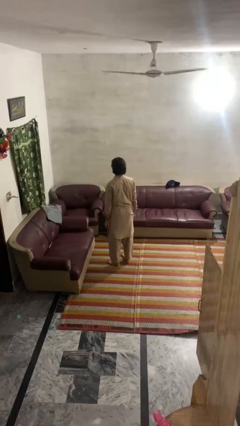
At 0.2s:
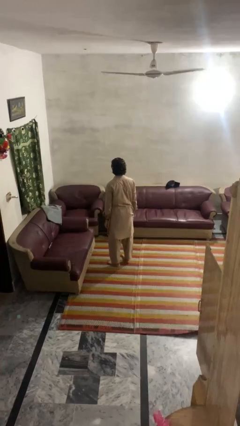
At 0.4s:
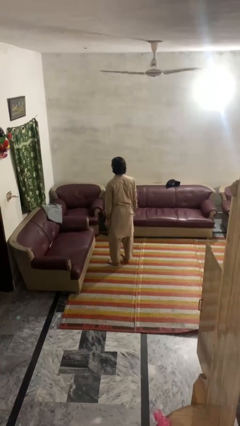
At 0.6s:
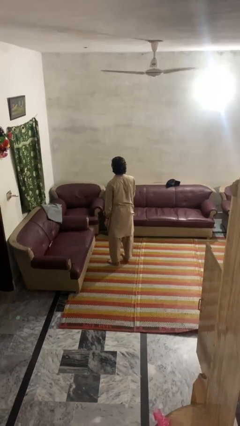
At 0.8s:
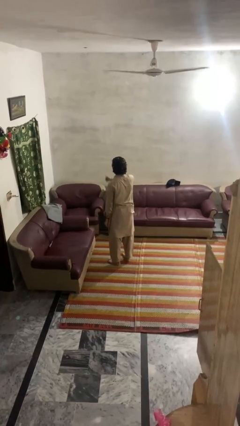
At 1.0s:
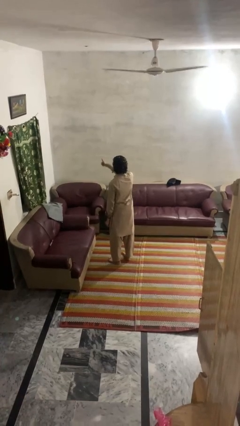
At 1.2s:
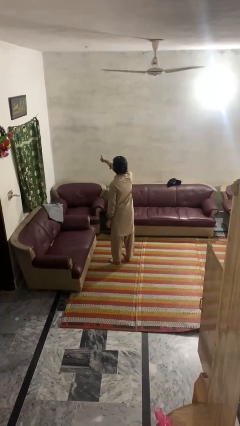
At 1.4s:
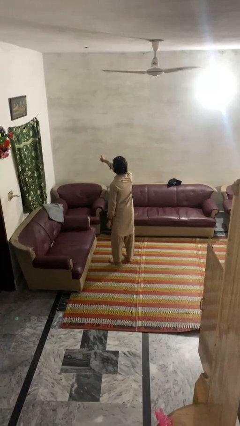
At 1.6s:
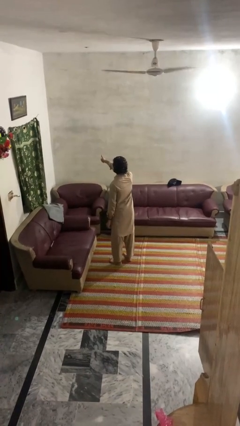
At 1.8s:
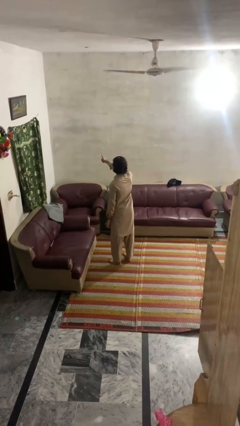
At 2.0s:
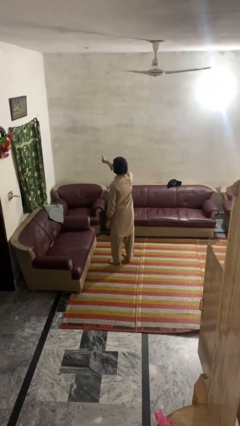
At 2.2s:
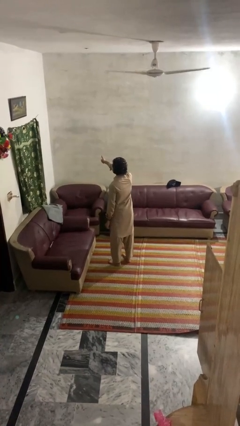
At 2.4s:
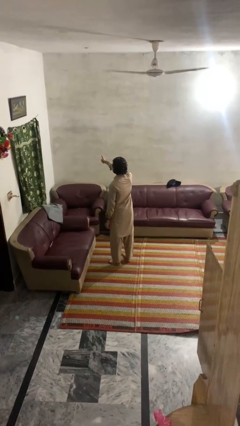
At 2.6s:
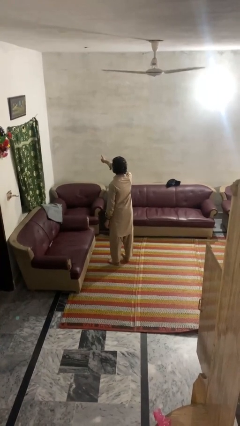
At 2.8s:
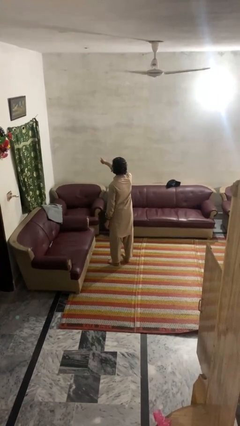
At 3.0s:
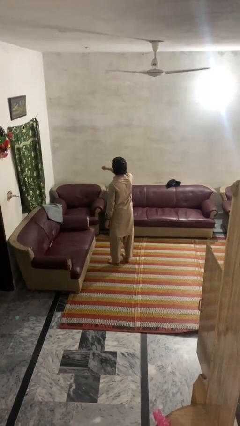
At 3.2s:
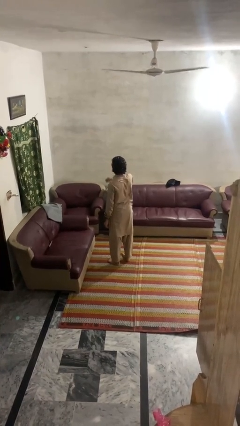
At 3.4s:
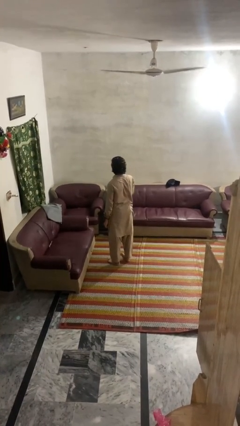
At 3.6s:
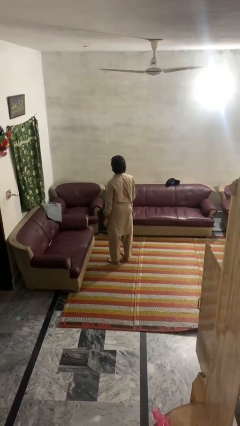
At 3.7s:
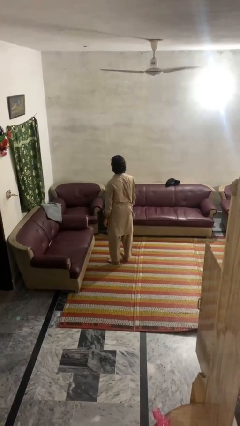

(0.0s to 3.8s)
person gestures thumbs up

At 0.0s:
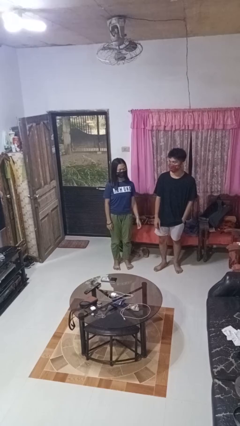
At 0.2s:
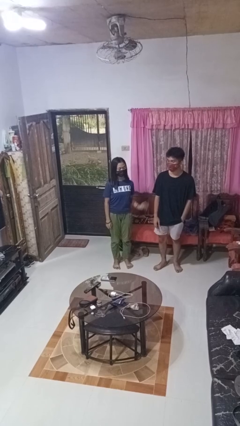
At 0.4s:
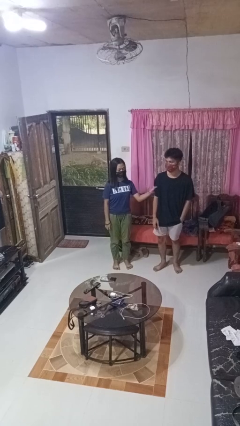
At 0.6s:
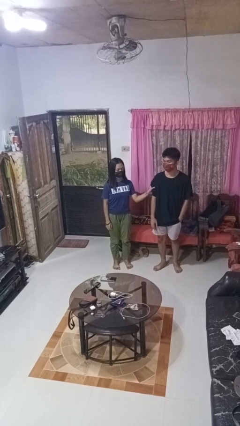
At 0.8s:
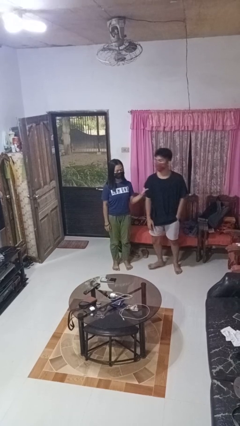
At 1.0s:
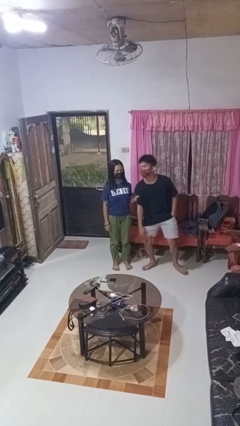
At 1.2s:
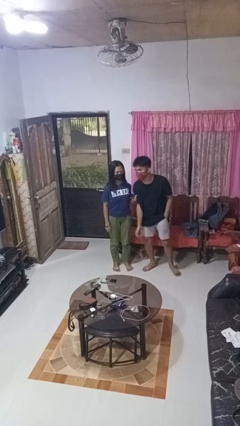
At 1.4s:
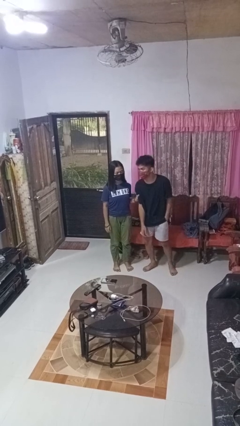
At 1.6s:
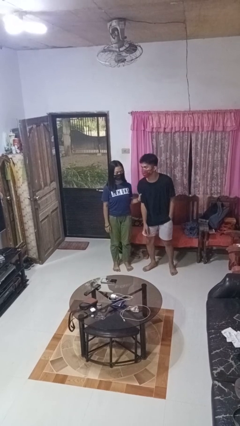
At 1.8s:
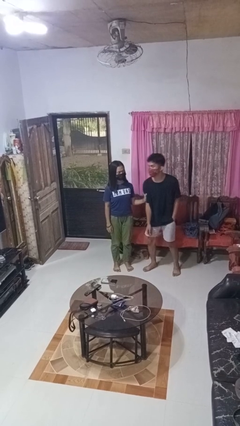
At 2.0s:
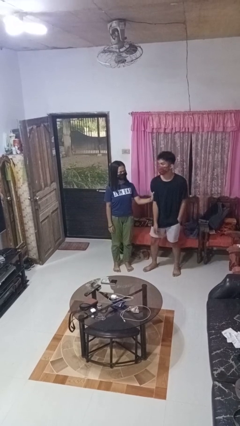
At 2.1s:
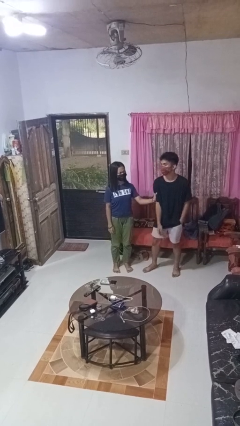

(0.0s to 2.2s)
person grabs person by bicep

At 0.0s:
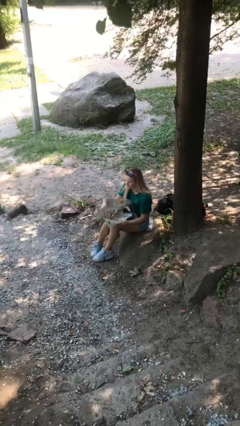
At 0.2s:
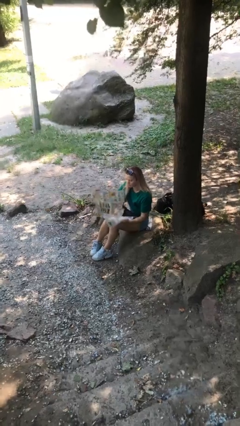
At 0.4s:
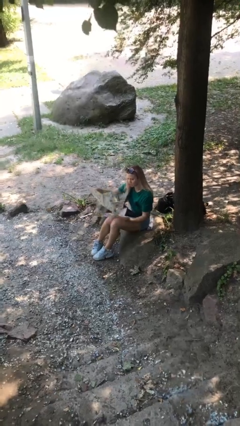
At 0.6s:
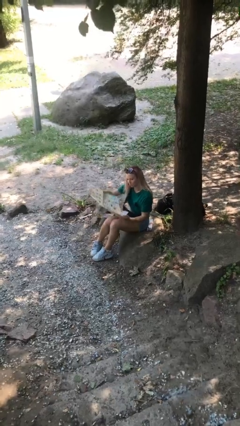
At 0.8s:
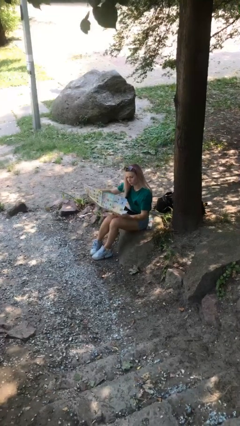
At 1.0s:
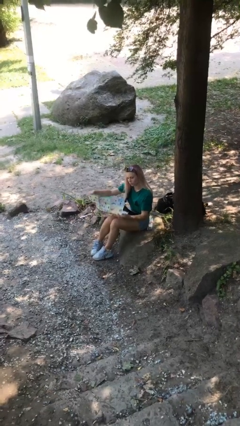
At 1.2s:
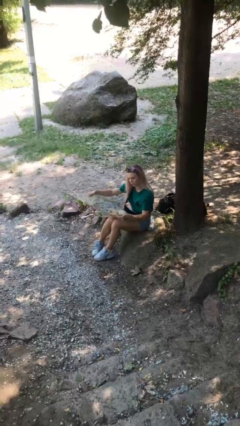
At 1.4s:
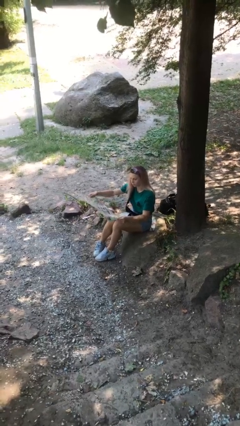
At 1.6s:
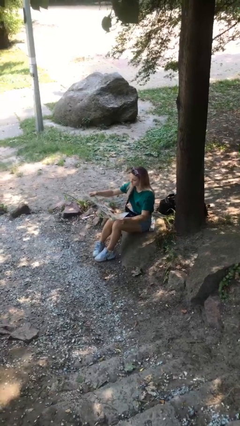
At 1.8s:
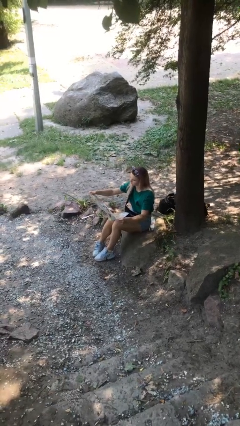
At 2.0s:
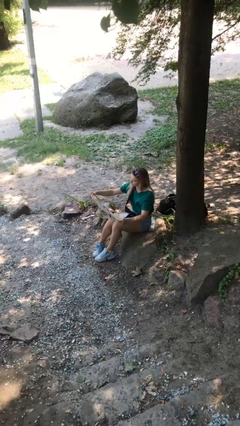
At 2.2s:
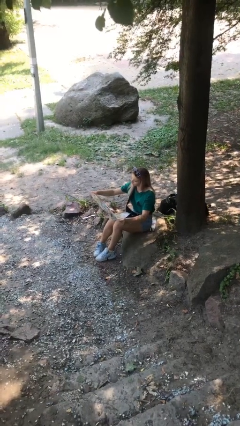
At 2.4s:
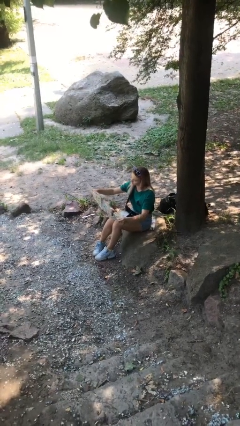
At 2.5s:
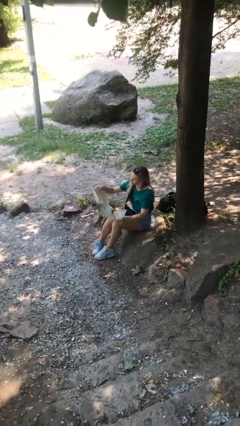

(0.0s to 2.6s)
person reads newspaper

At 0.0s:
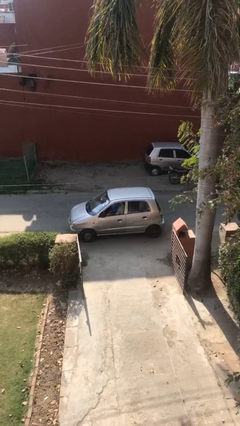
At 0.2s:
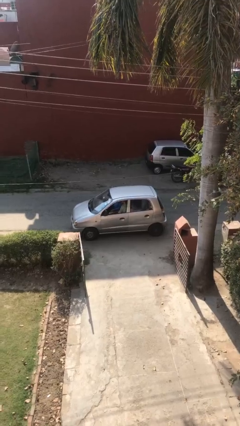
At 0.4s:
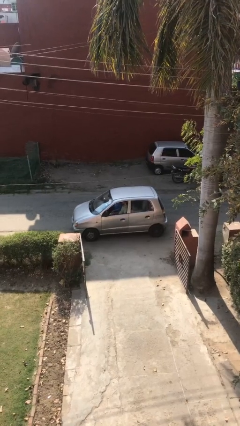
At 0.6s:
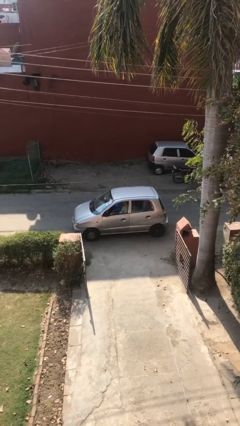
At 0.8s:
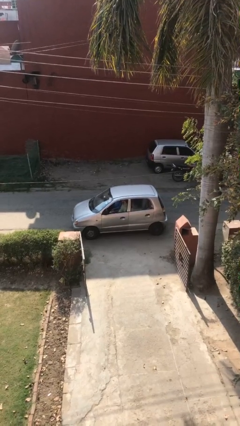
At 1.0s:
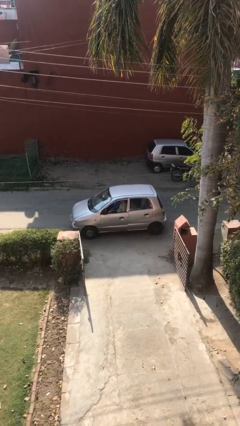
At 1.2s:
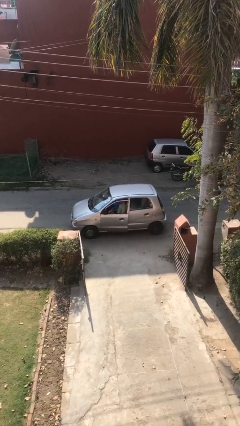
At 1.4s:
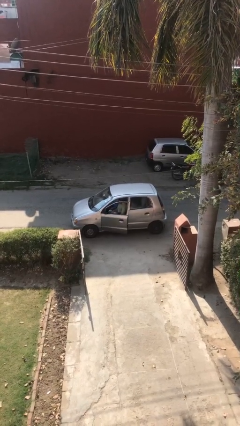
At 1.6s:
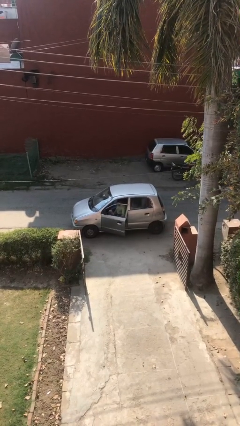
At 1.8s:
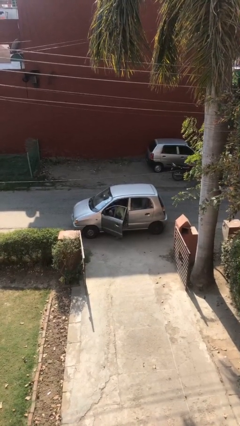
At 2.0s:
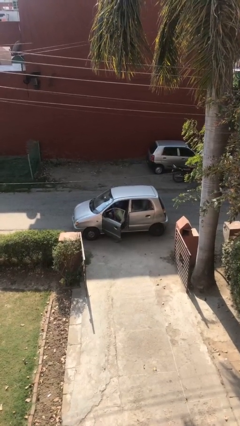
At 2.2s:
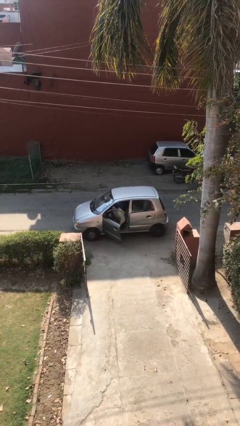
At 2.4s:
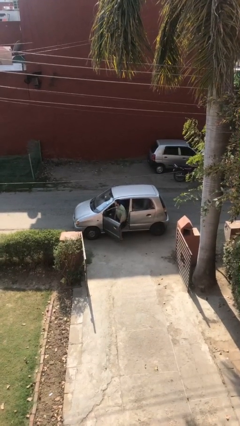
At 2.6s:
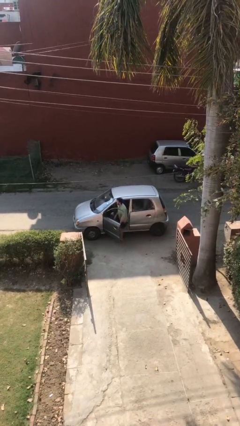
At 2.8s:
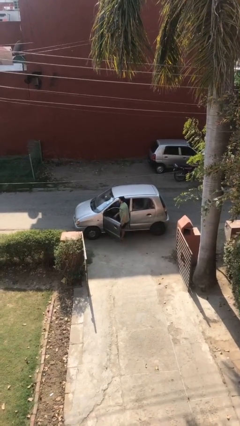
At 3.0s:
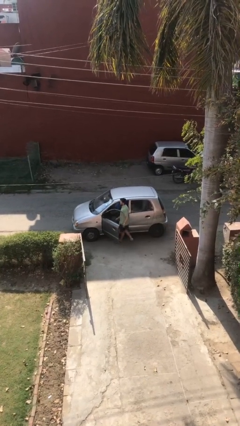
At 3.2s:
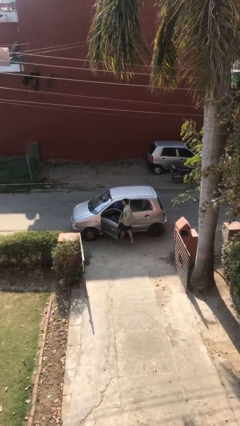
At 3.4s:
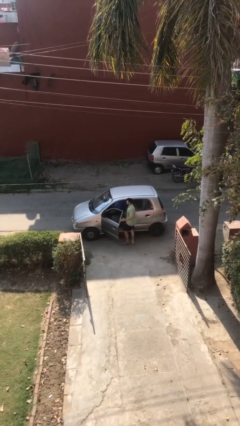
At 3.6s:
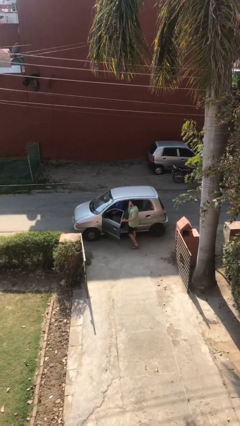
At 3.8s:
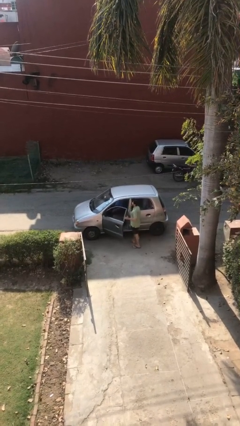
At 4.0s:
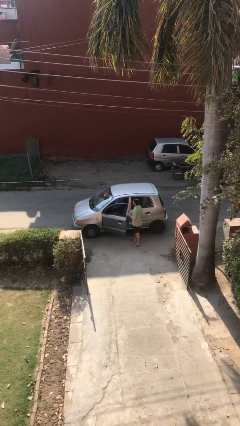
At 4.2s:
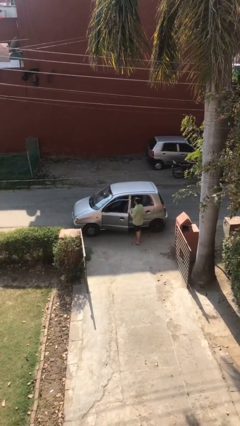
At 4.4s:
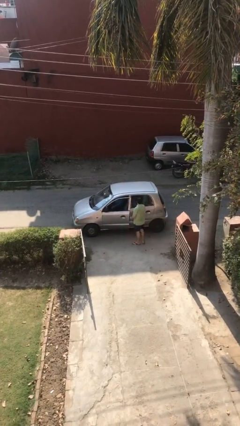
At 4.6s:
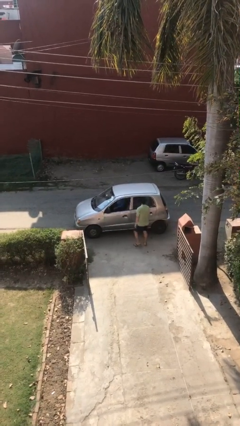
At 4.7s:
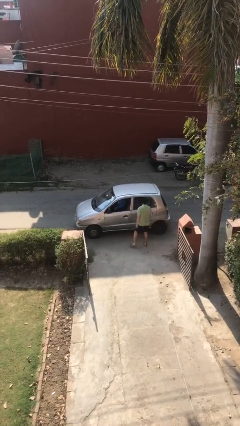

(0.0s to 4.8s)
car drops off person

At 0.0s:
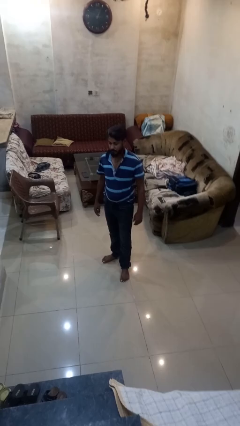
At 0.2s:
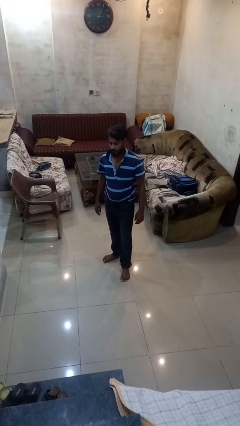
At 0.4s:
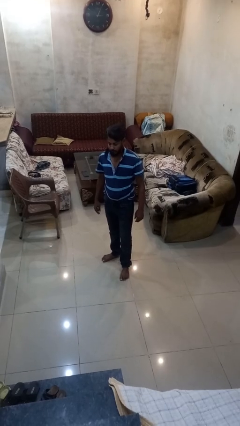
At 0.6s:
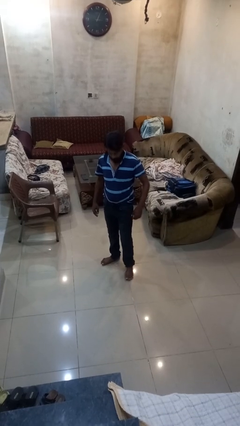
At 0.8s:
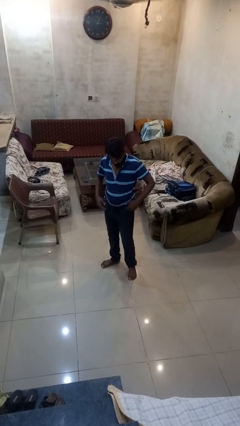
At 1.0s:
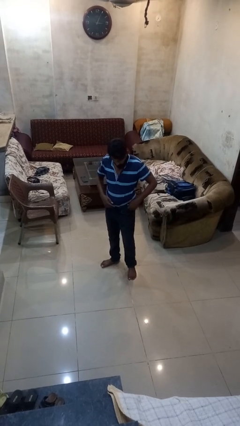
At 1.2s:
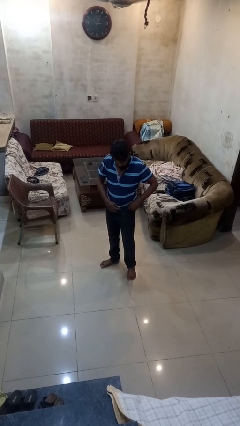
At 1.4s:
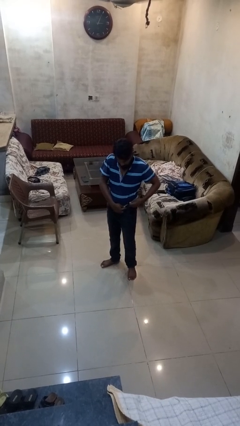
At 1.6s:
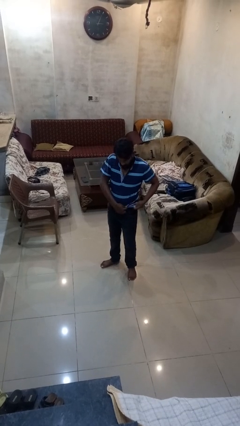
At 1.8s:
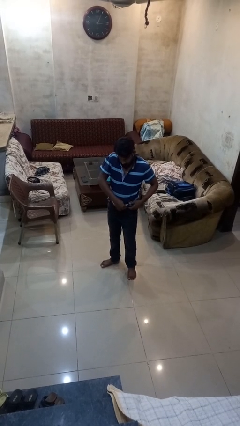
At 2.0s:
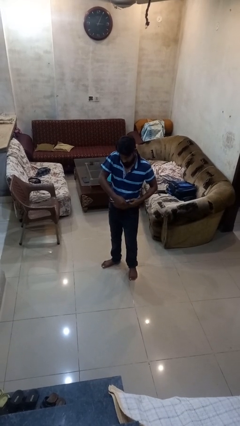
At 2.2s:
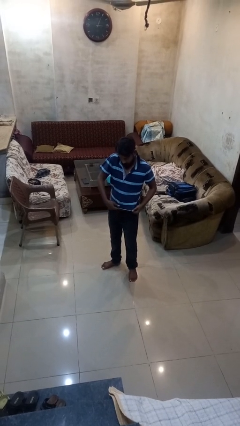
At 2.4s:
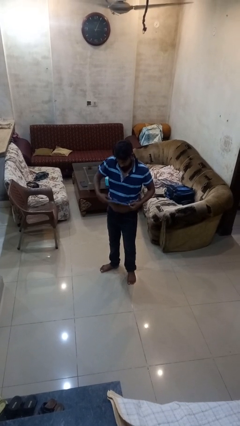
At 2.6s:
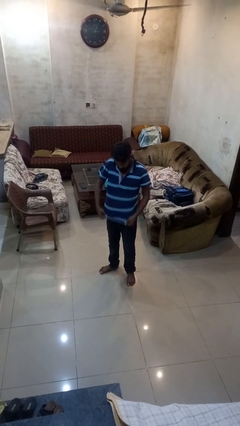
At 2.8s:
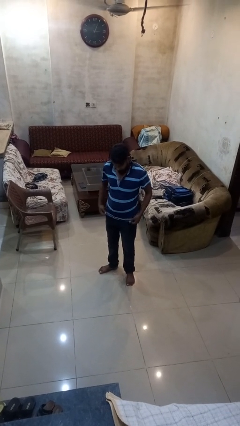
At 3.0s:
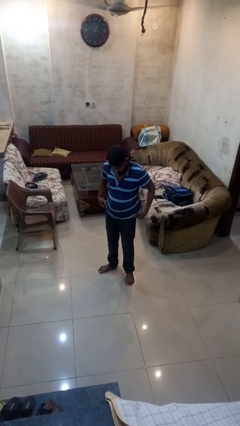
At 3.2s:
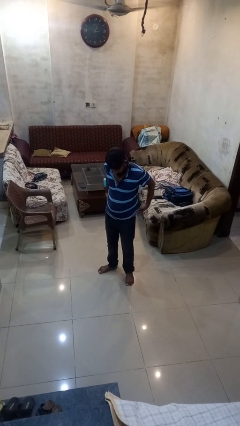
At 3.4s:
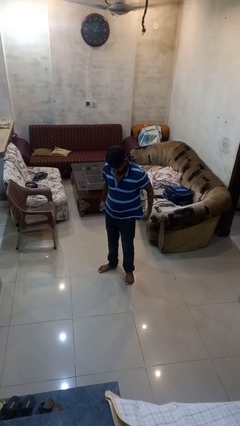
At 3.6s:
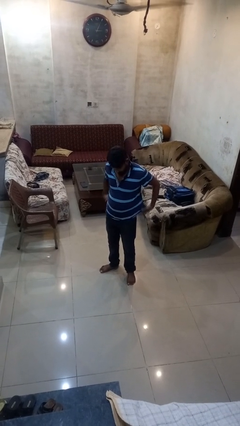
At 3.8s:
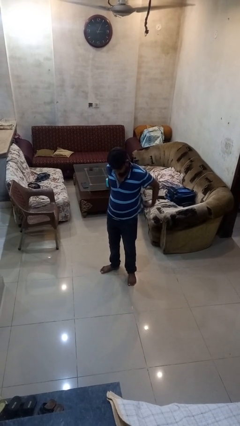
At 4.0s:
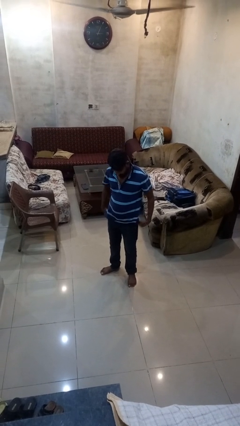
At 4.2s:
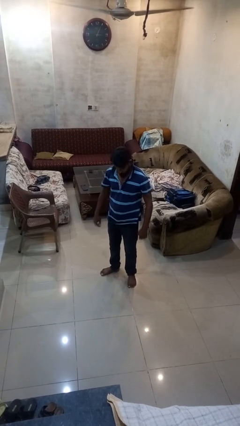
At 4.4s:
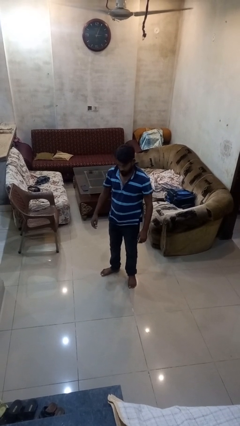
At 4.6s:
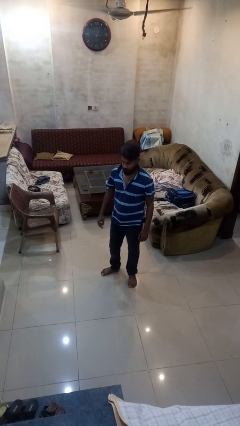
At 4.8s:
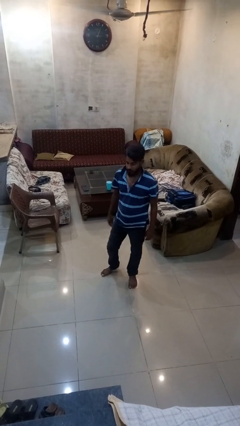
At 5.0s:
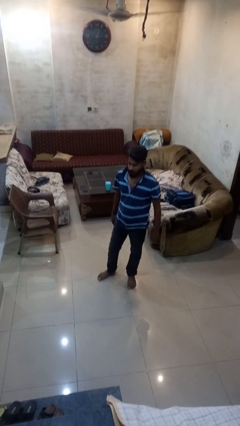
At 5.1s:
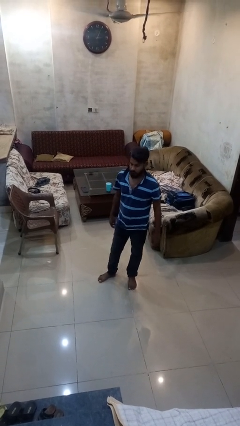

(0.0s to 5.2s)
person untucks shirt
